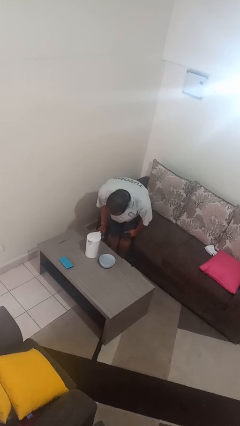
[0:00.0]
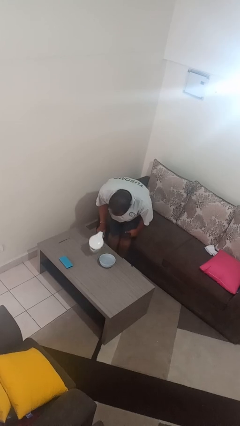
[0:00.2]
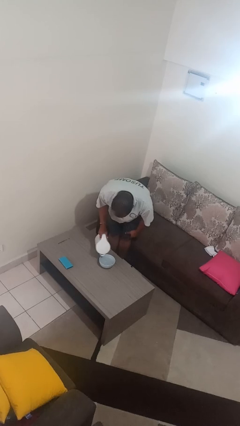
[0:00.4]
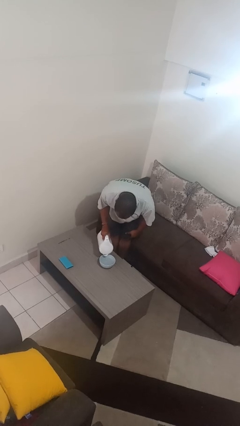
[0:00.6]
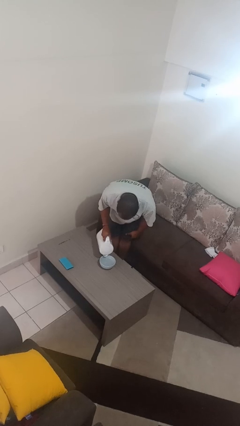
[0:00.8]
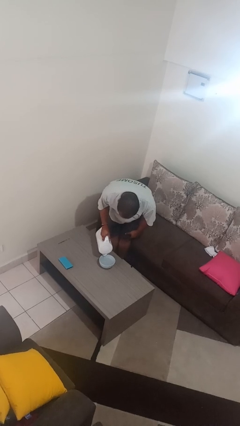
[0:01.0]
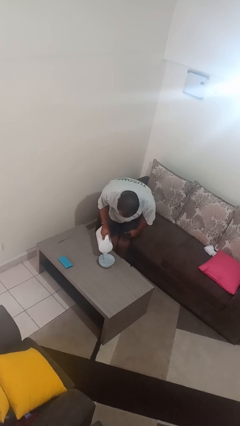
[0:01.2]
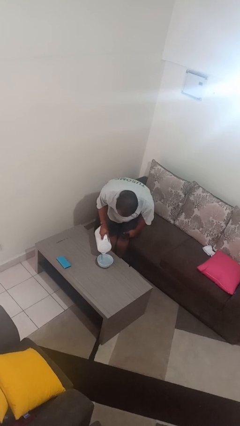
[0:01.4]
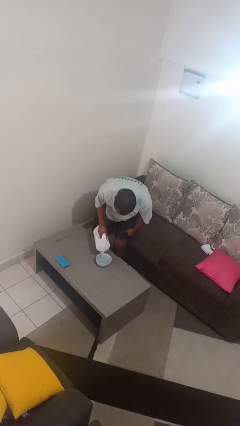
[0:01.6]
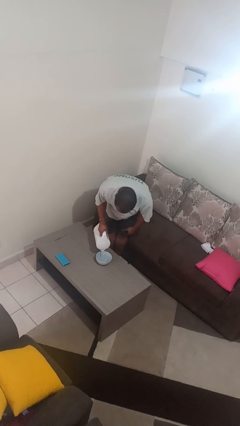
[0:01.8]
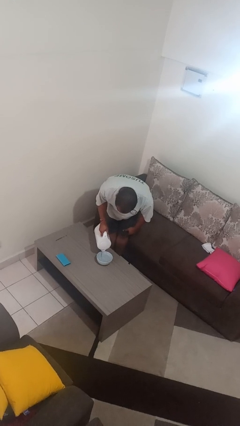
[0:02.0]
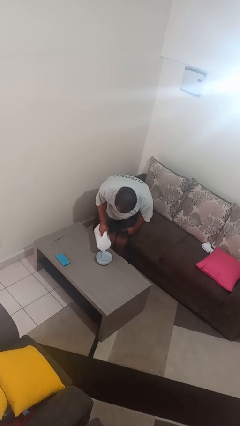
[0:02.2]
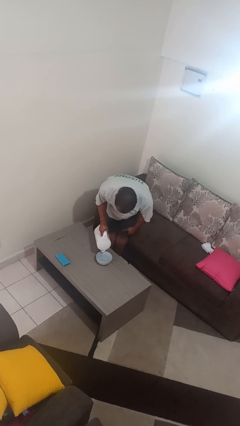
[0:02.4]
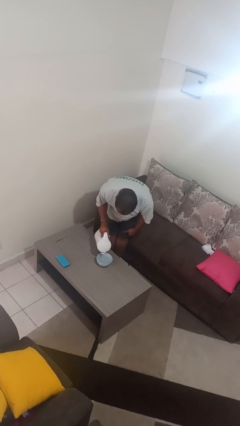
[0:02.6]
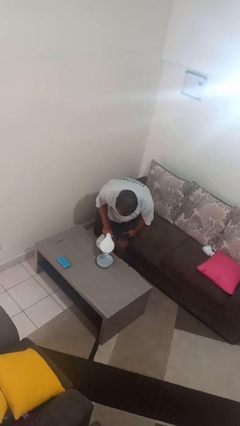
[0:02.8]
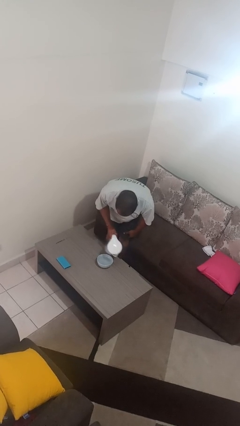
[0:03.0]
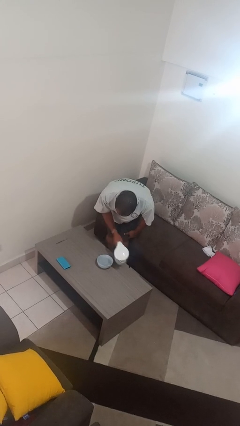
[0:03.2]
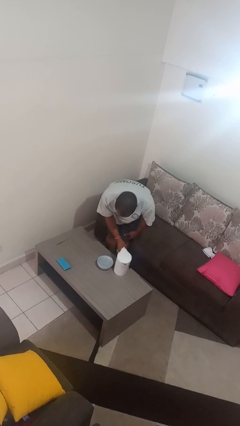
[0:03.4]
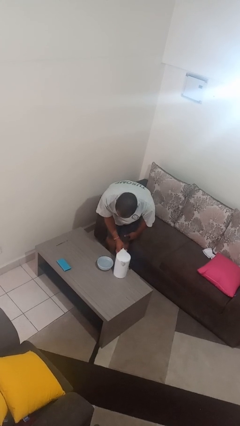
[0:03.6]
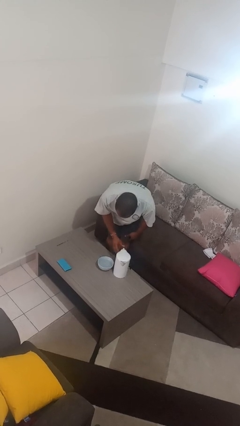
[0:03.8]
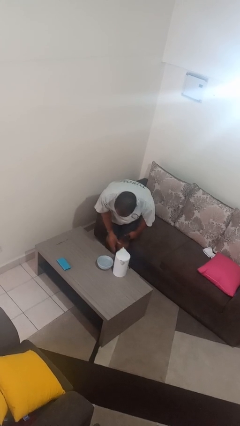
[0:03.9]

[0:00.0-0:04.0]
person pours into bowl

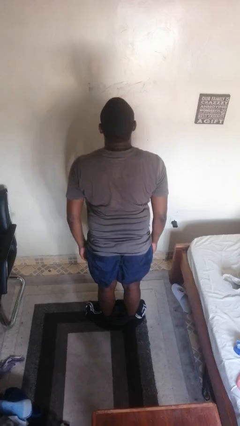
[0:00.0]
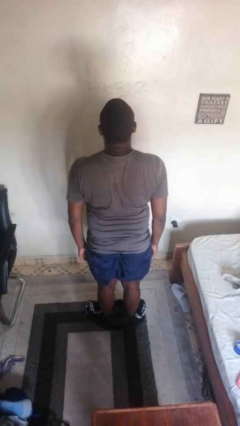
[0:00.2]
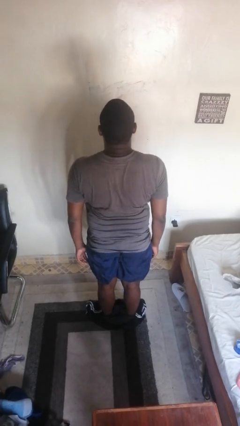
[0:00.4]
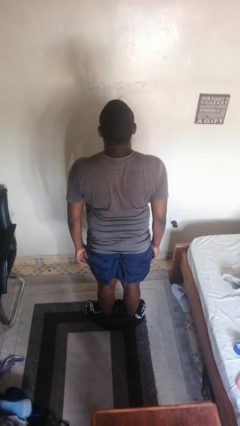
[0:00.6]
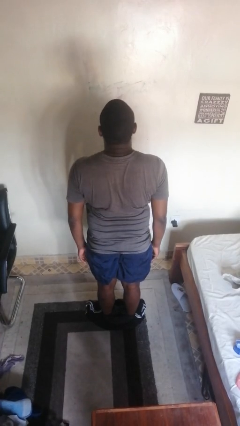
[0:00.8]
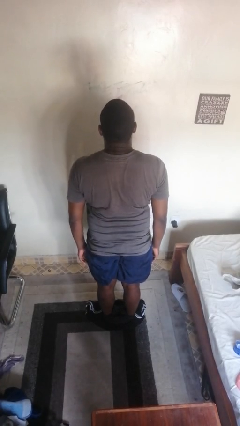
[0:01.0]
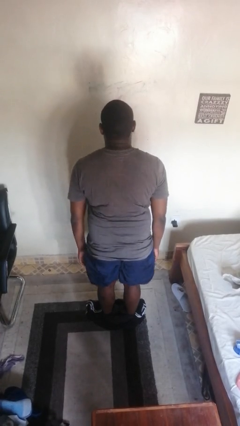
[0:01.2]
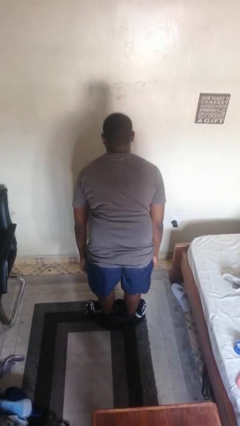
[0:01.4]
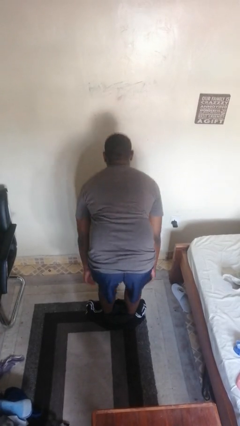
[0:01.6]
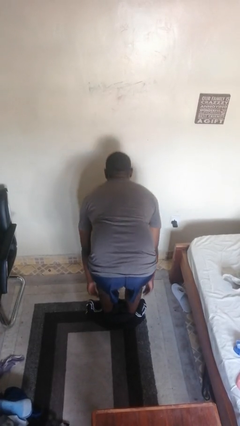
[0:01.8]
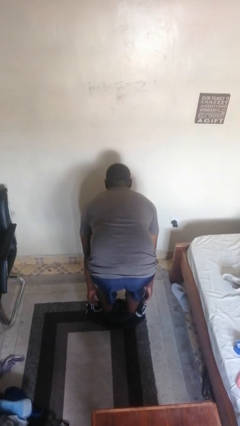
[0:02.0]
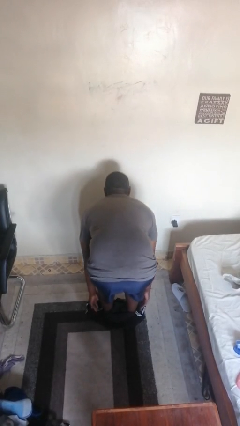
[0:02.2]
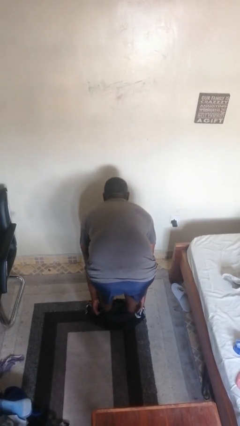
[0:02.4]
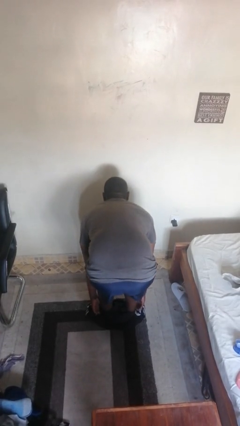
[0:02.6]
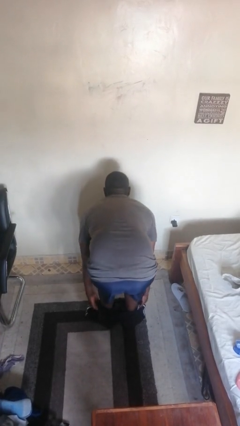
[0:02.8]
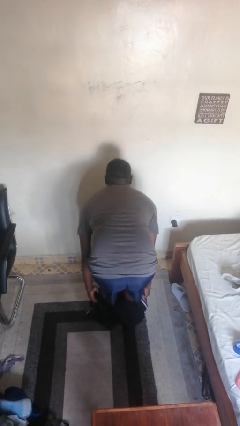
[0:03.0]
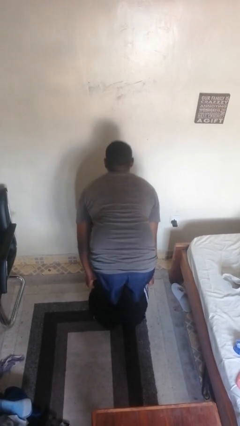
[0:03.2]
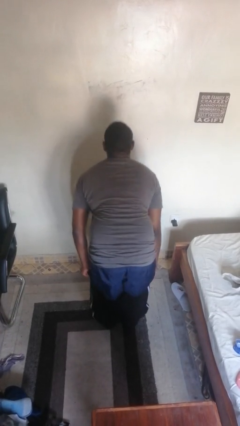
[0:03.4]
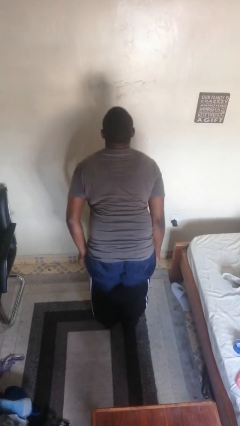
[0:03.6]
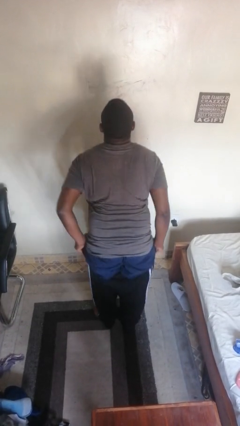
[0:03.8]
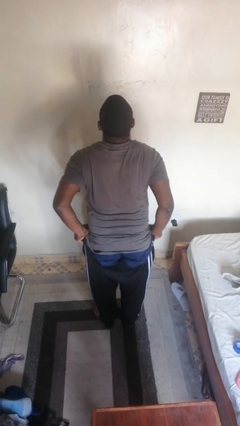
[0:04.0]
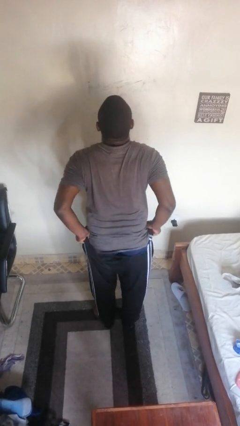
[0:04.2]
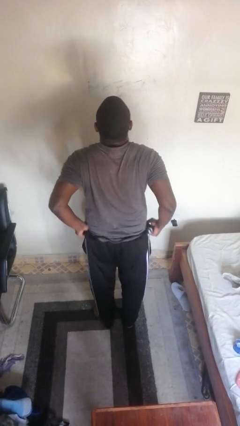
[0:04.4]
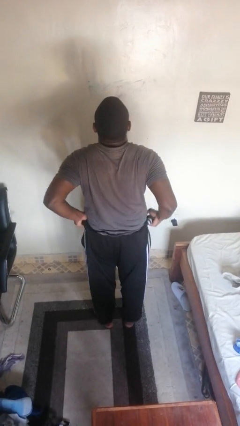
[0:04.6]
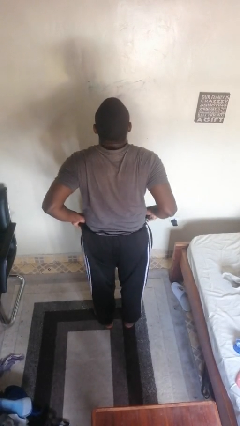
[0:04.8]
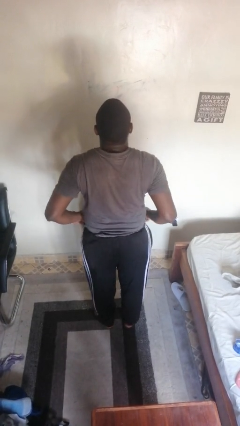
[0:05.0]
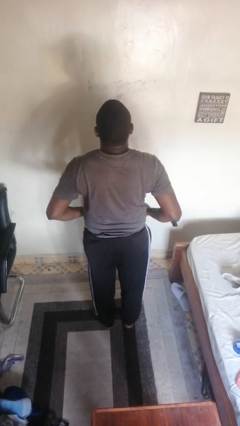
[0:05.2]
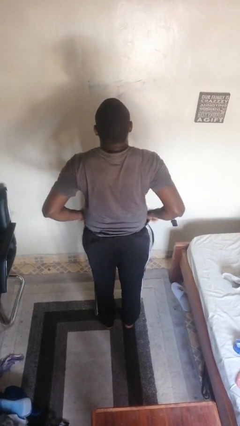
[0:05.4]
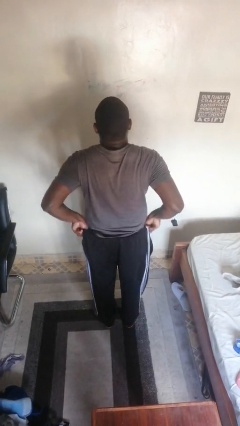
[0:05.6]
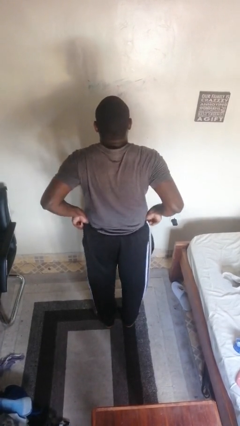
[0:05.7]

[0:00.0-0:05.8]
person puts on pants

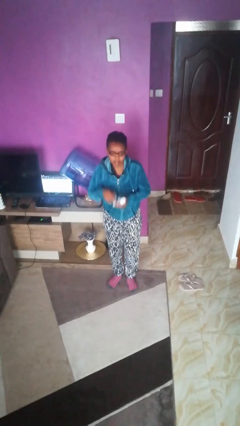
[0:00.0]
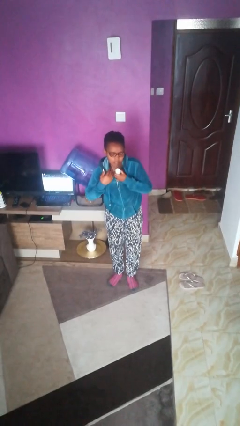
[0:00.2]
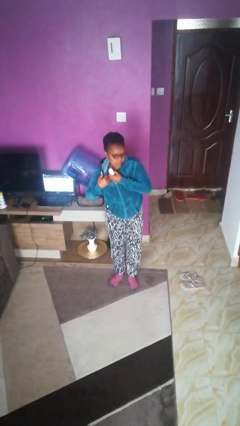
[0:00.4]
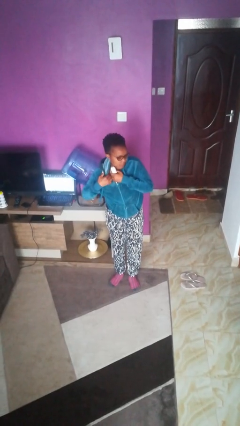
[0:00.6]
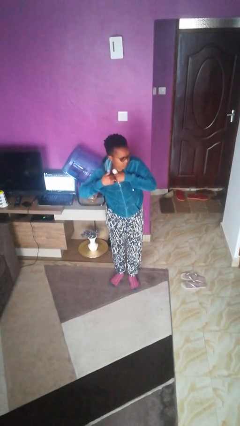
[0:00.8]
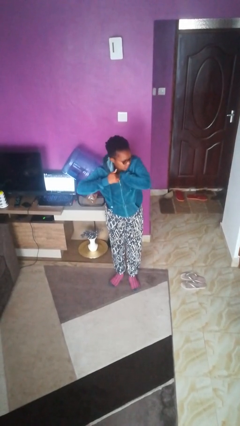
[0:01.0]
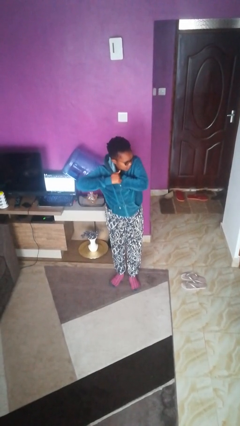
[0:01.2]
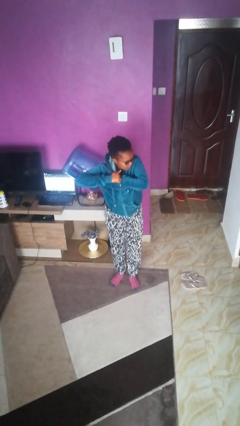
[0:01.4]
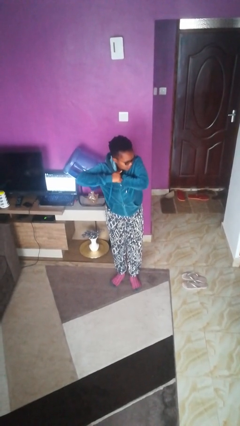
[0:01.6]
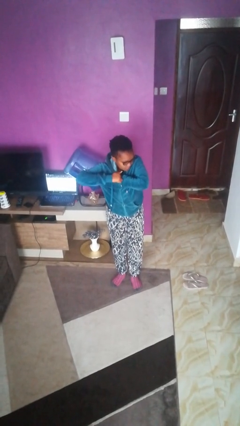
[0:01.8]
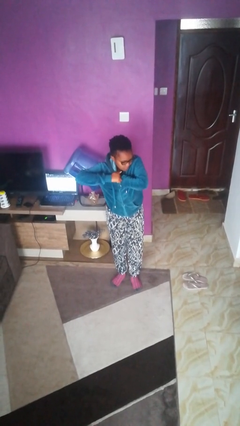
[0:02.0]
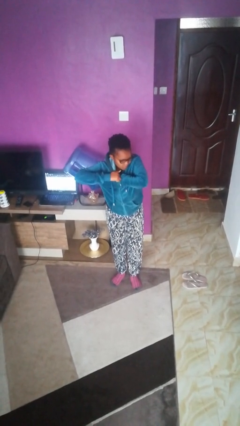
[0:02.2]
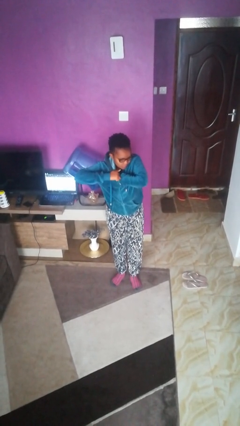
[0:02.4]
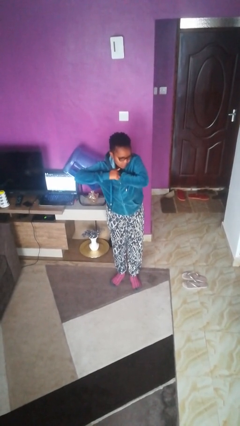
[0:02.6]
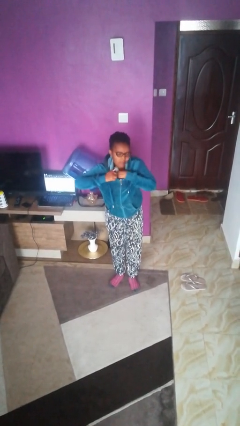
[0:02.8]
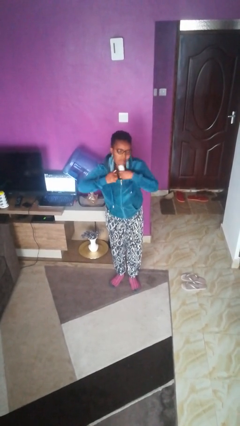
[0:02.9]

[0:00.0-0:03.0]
person applies deodorant

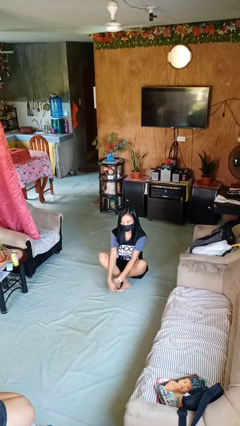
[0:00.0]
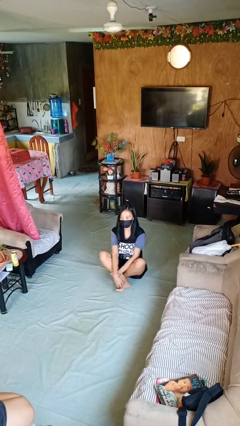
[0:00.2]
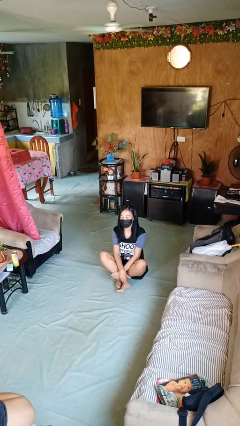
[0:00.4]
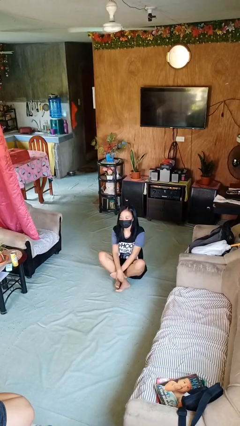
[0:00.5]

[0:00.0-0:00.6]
person sits crisscross

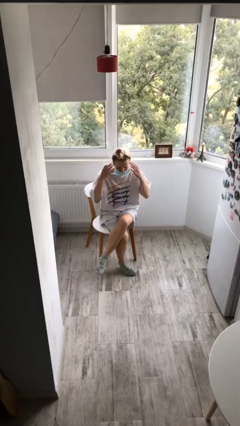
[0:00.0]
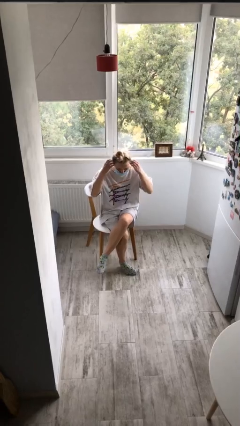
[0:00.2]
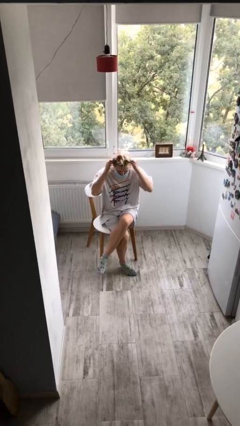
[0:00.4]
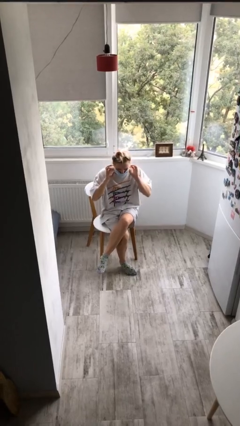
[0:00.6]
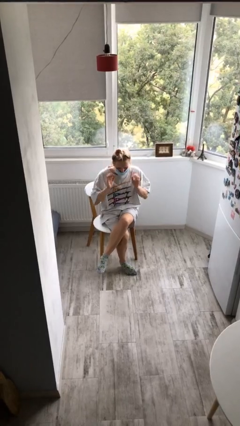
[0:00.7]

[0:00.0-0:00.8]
person puts on facemask

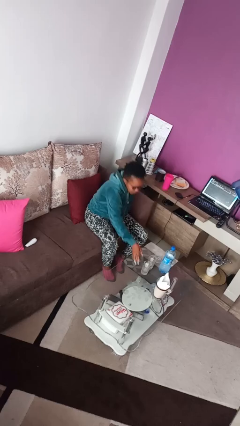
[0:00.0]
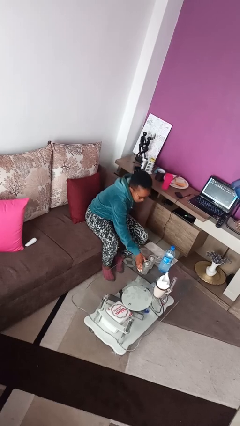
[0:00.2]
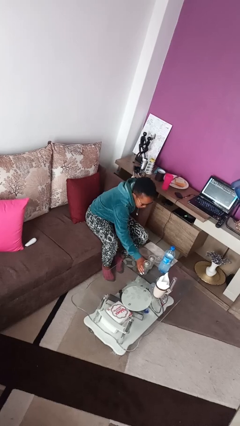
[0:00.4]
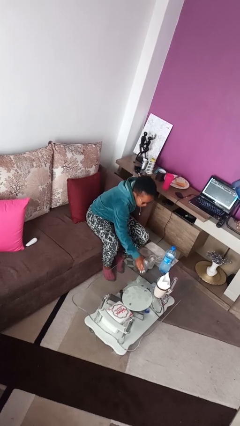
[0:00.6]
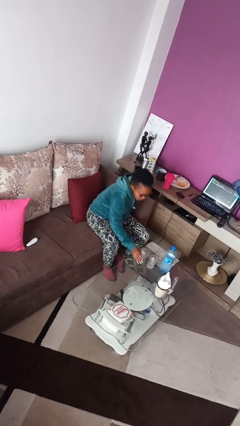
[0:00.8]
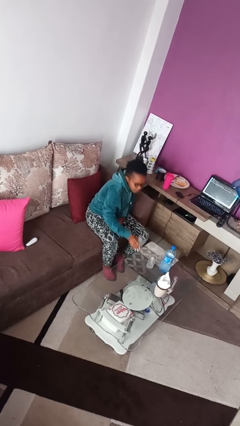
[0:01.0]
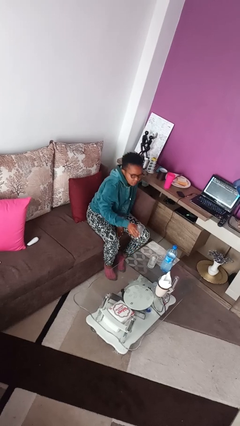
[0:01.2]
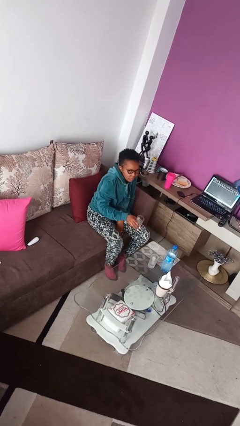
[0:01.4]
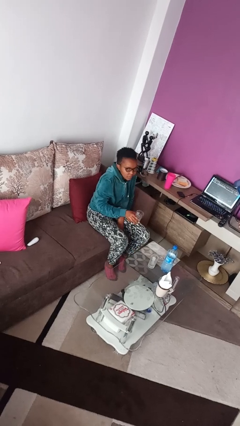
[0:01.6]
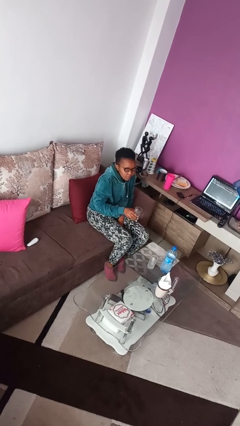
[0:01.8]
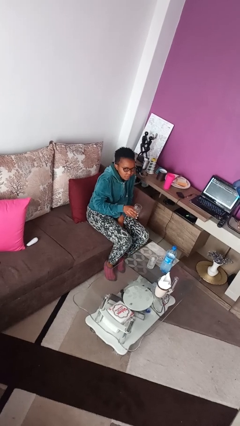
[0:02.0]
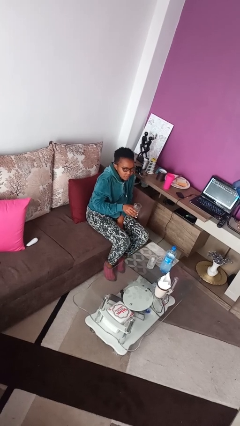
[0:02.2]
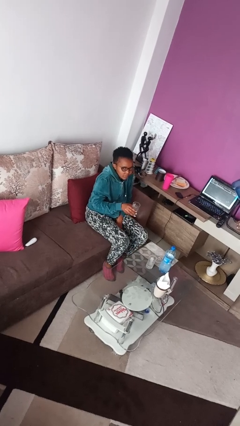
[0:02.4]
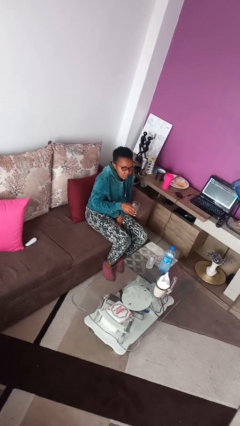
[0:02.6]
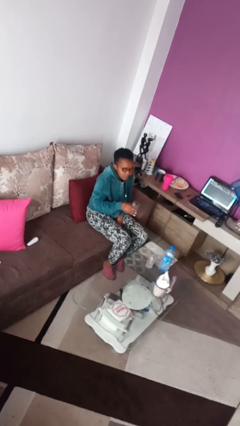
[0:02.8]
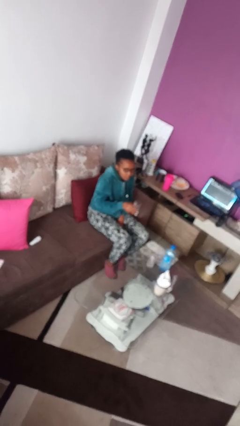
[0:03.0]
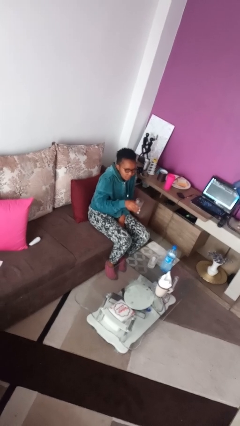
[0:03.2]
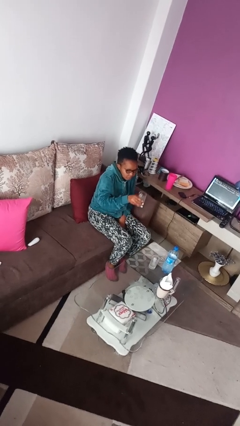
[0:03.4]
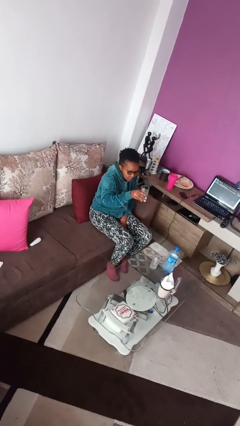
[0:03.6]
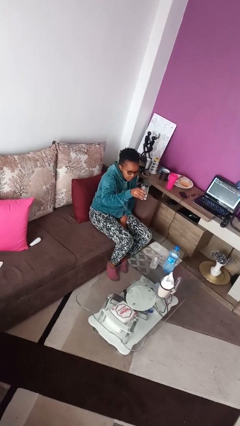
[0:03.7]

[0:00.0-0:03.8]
person picks up object from table
